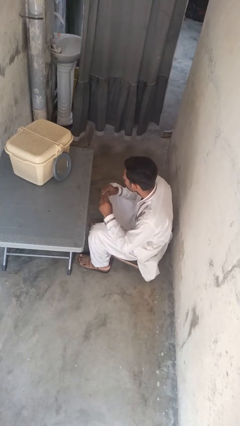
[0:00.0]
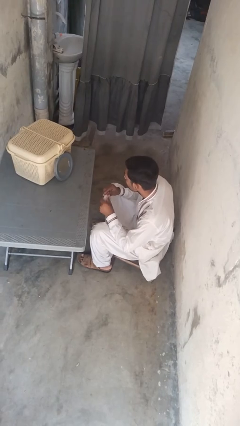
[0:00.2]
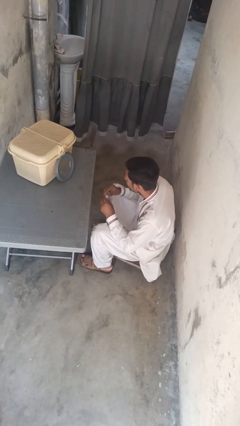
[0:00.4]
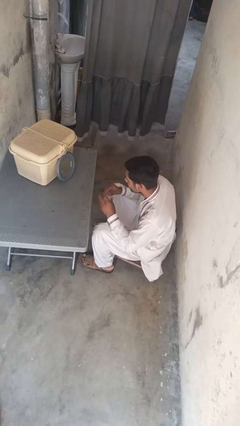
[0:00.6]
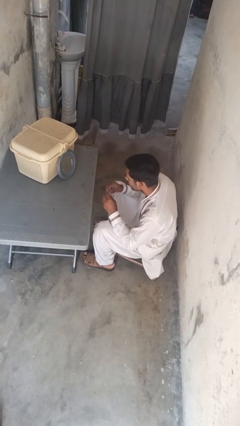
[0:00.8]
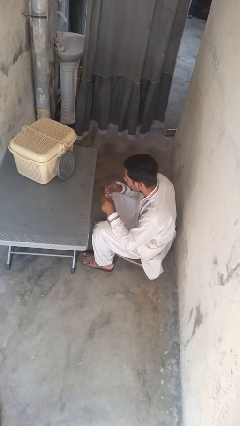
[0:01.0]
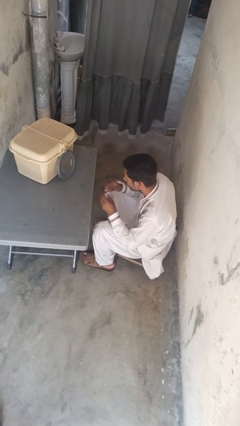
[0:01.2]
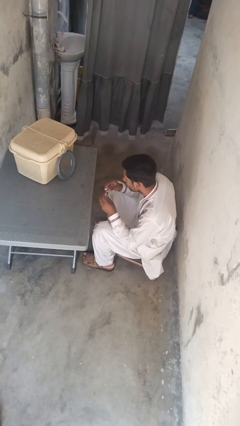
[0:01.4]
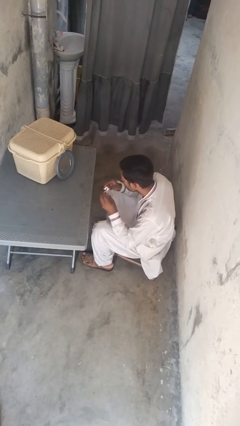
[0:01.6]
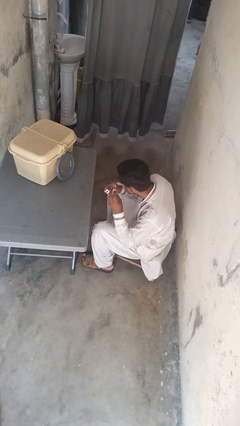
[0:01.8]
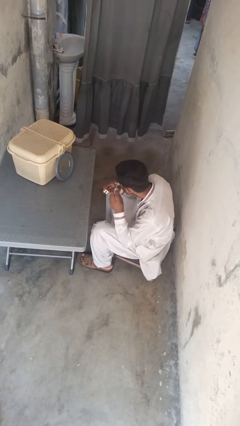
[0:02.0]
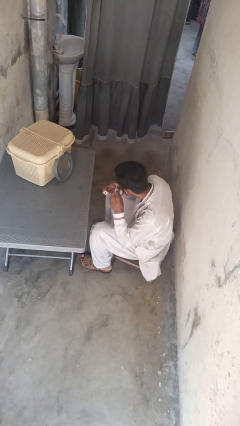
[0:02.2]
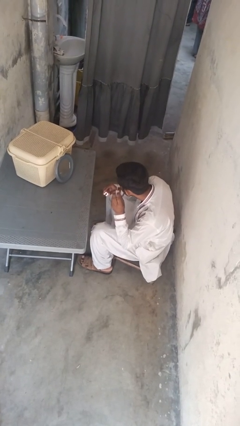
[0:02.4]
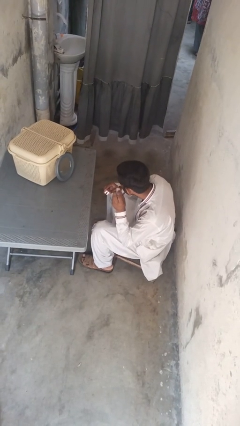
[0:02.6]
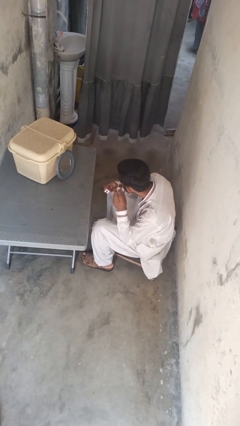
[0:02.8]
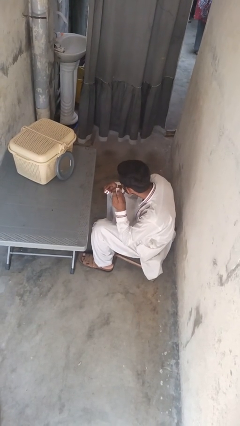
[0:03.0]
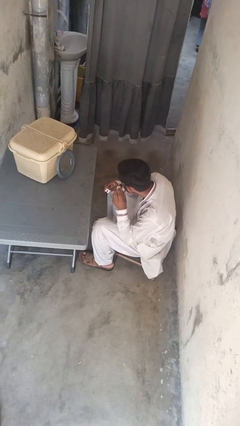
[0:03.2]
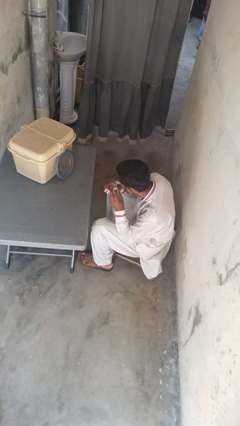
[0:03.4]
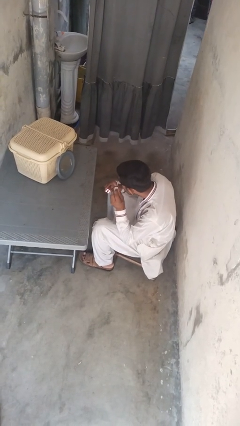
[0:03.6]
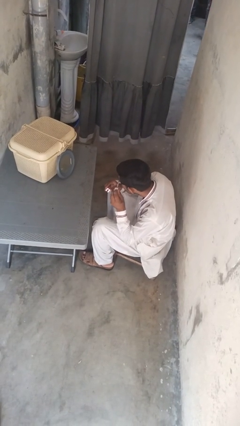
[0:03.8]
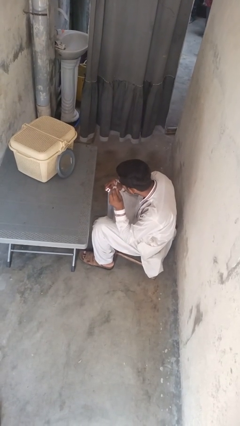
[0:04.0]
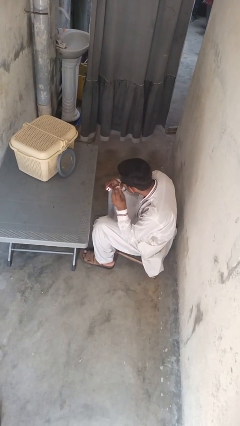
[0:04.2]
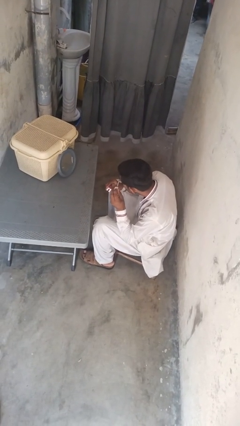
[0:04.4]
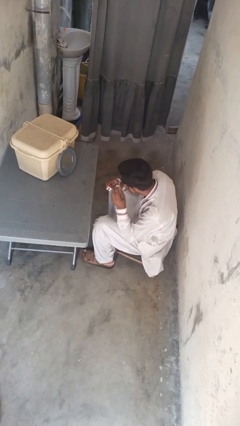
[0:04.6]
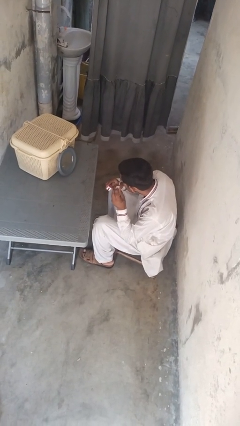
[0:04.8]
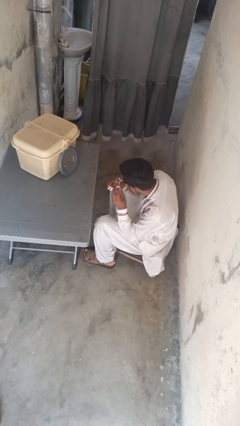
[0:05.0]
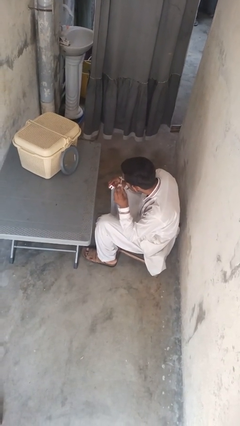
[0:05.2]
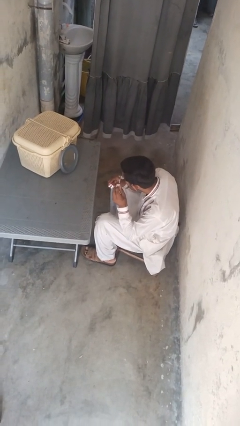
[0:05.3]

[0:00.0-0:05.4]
person applies eye makeup

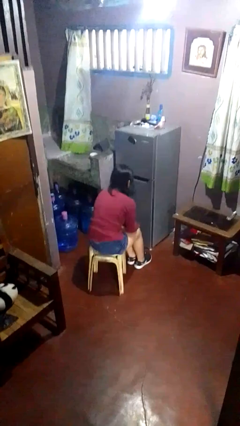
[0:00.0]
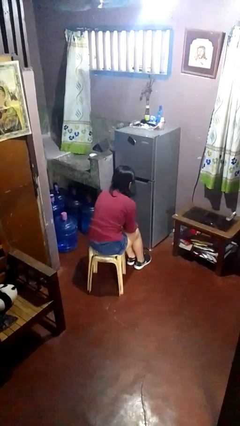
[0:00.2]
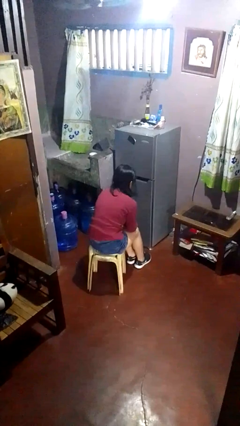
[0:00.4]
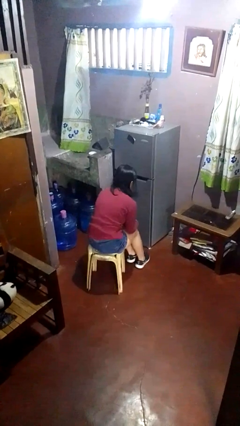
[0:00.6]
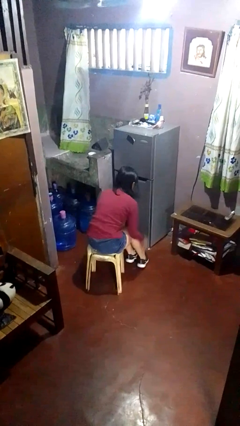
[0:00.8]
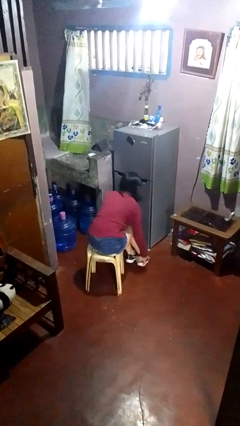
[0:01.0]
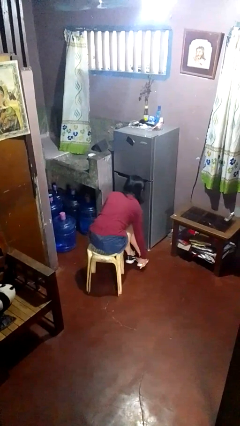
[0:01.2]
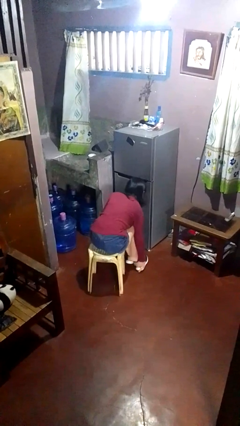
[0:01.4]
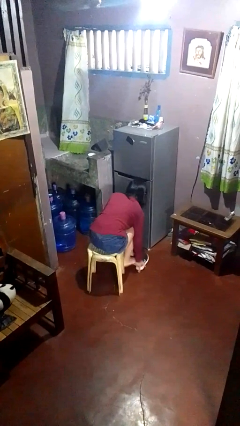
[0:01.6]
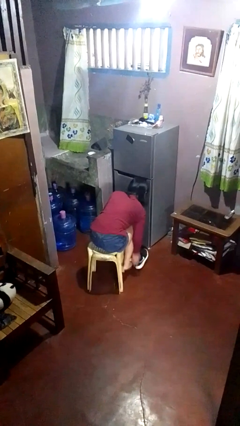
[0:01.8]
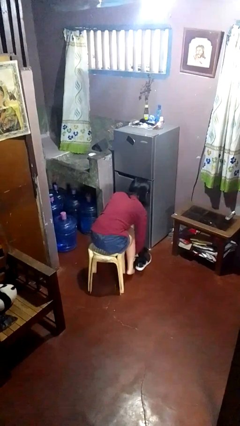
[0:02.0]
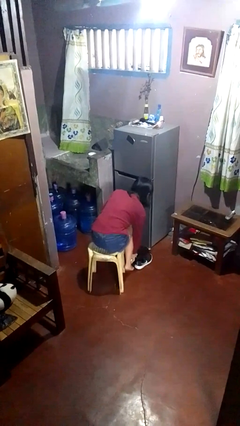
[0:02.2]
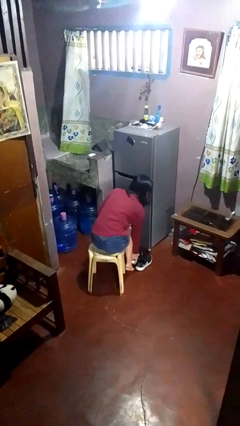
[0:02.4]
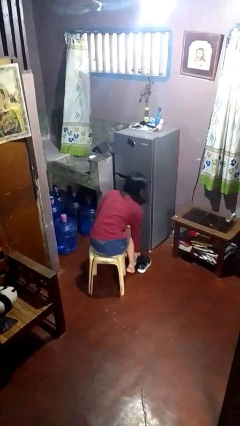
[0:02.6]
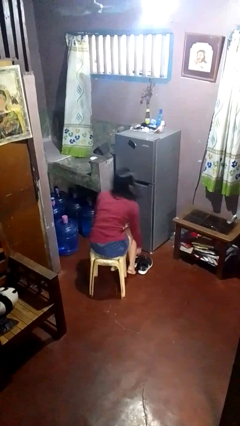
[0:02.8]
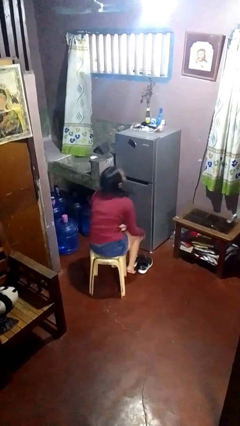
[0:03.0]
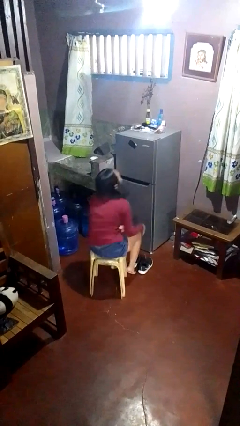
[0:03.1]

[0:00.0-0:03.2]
person takes off shoes

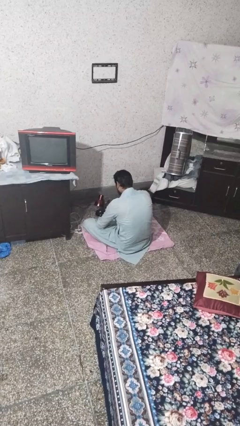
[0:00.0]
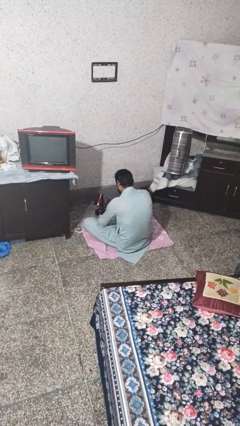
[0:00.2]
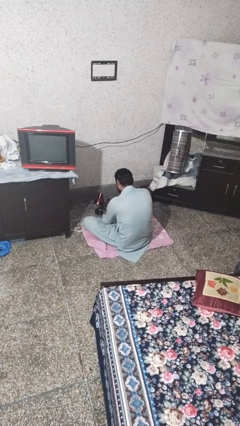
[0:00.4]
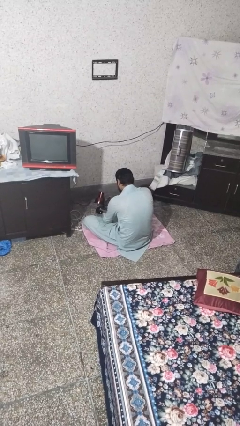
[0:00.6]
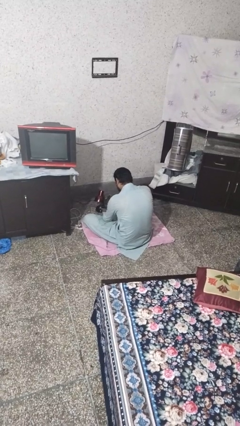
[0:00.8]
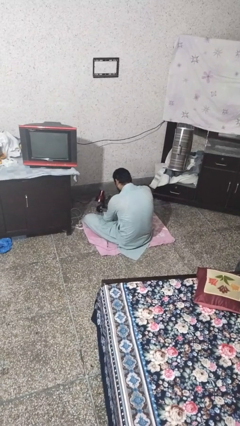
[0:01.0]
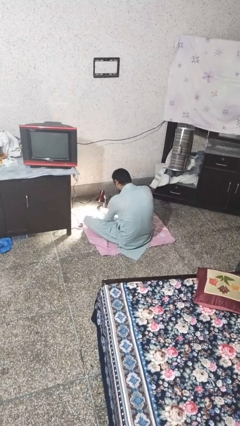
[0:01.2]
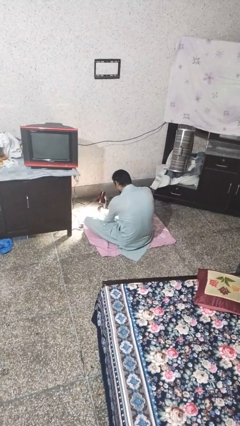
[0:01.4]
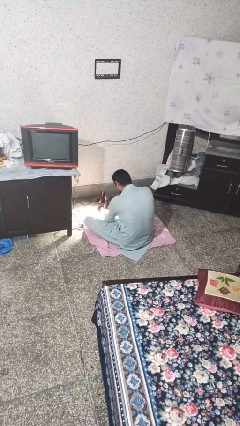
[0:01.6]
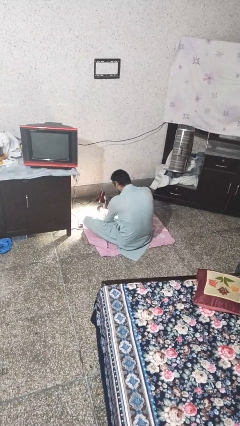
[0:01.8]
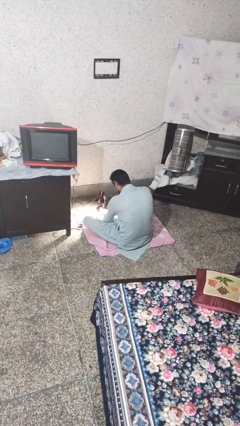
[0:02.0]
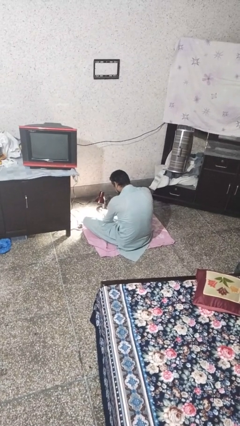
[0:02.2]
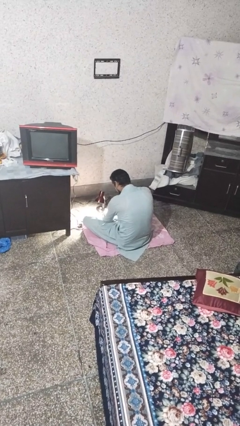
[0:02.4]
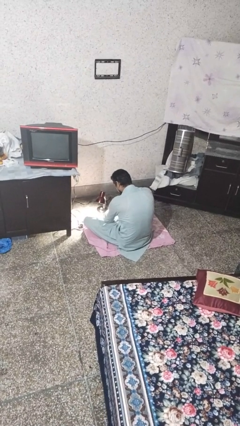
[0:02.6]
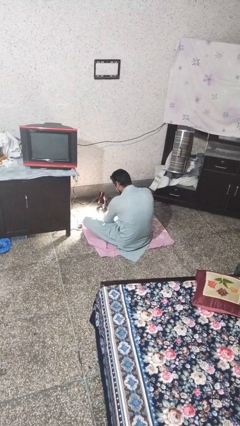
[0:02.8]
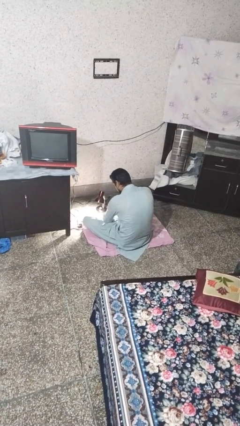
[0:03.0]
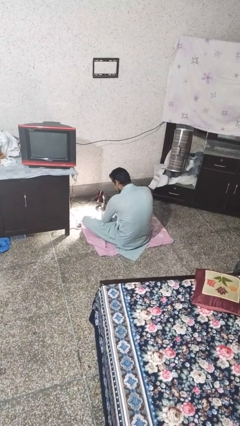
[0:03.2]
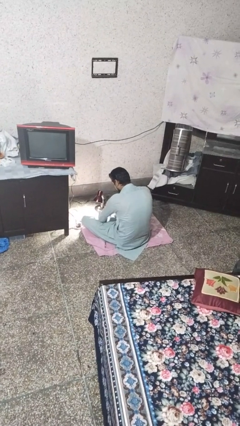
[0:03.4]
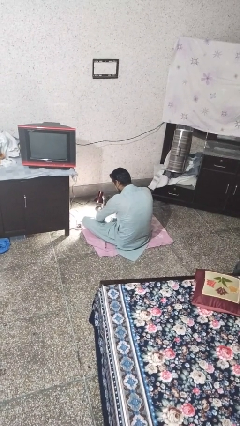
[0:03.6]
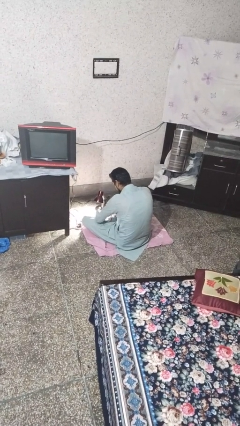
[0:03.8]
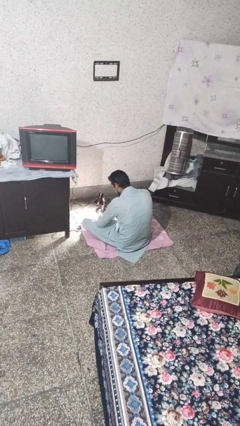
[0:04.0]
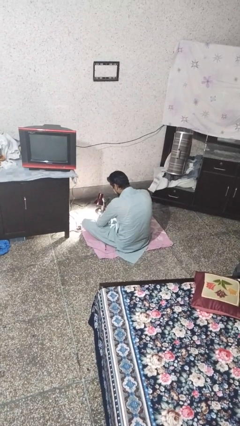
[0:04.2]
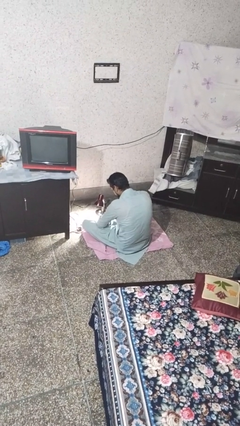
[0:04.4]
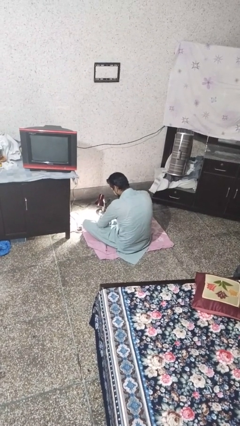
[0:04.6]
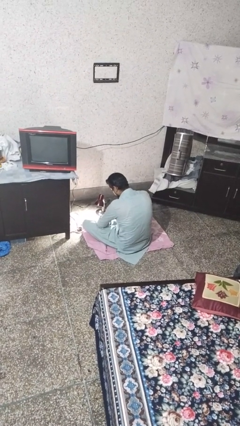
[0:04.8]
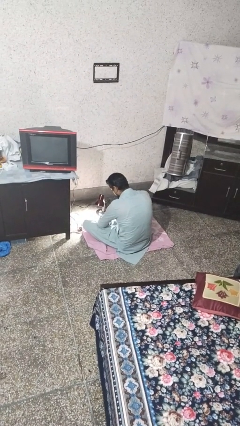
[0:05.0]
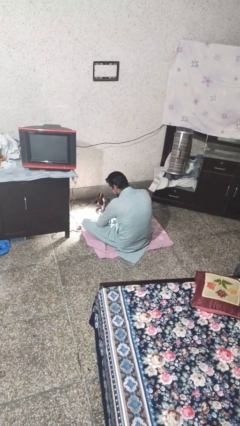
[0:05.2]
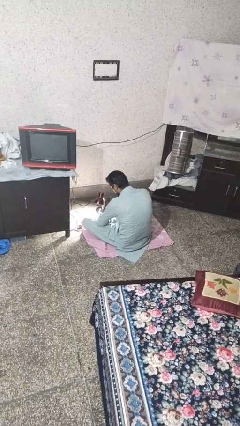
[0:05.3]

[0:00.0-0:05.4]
person turns on lamp

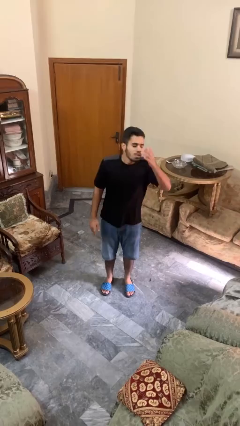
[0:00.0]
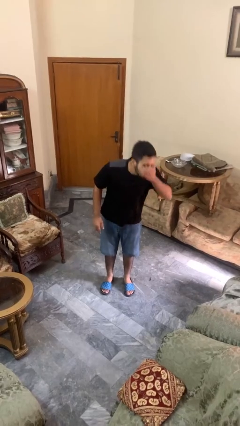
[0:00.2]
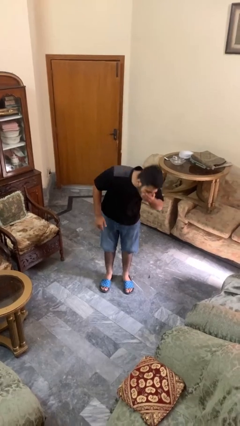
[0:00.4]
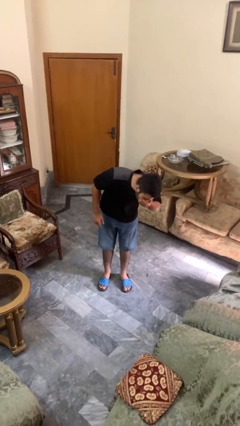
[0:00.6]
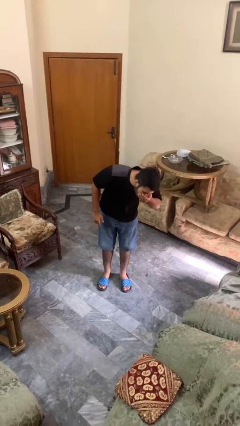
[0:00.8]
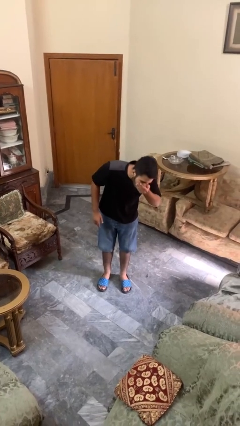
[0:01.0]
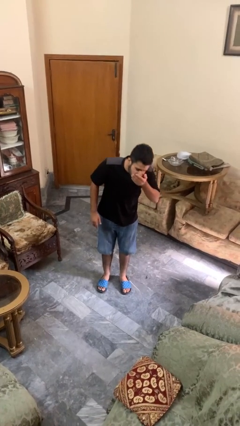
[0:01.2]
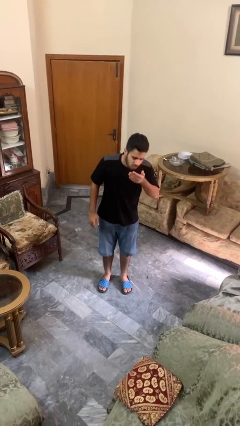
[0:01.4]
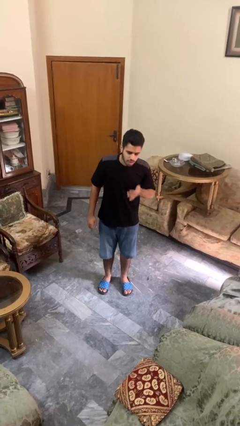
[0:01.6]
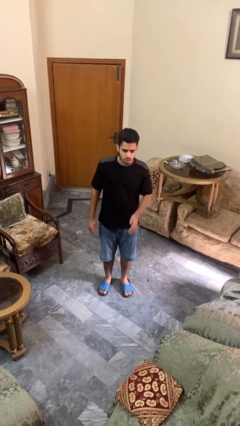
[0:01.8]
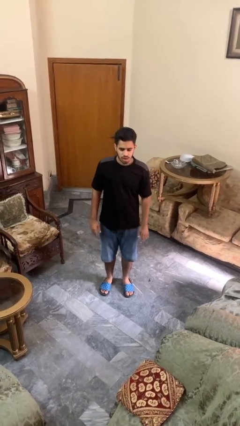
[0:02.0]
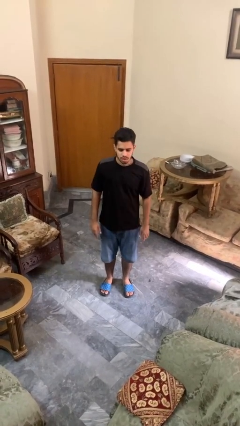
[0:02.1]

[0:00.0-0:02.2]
person sneezes into hand

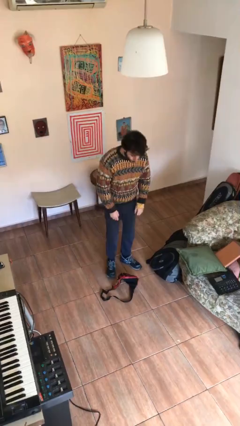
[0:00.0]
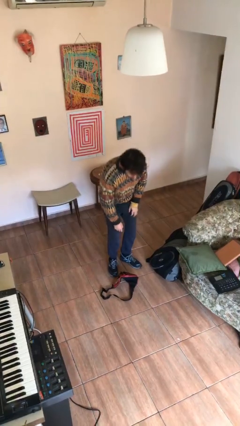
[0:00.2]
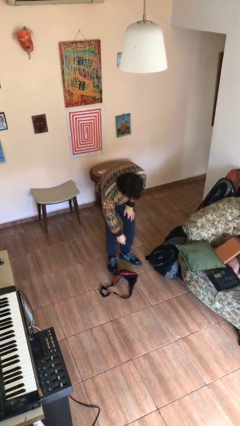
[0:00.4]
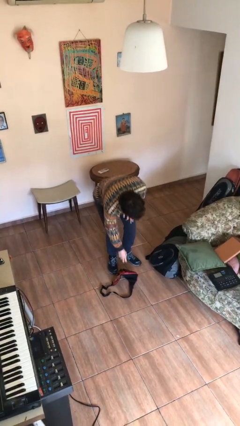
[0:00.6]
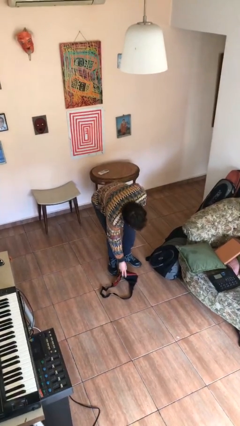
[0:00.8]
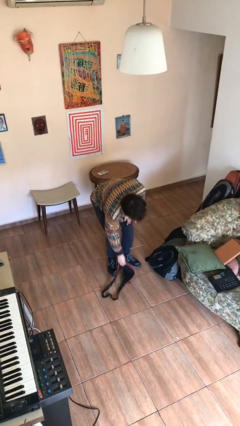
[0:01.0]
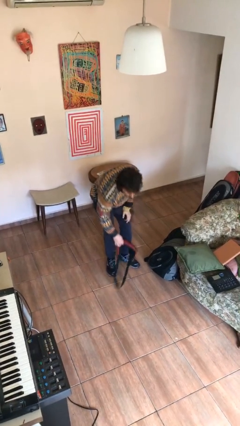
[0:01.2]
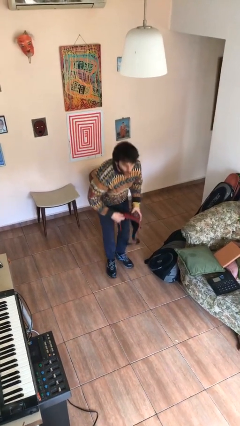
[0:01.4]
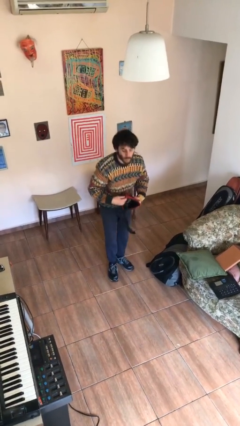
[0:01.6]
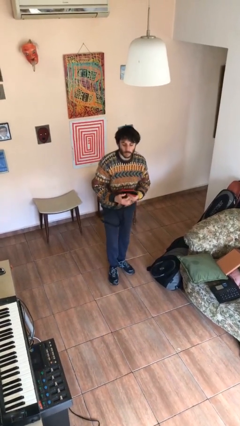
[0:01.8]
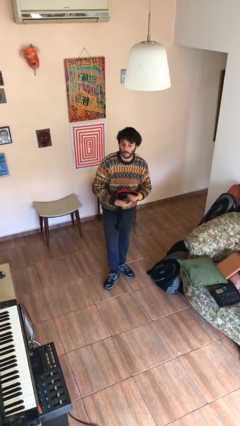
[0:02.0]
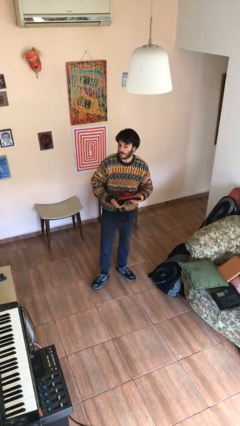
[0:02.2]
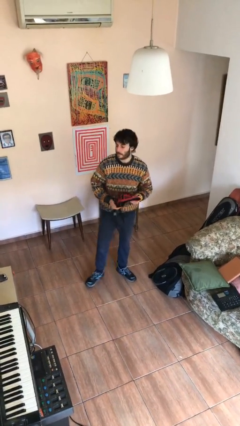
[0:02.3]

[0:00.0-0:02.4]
person picks up object from floor
